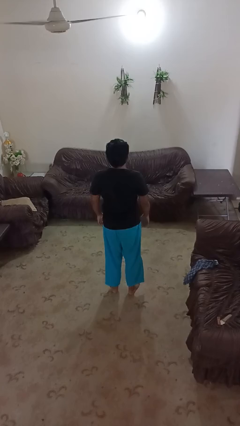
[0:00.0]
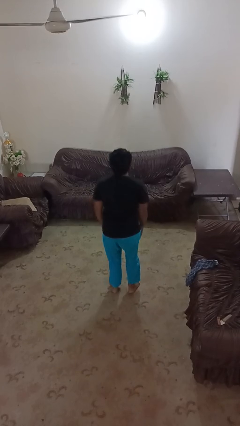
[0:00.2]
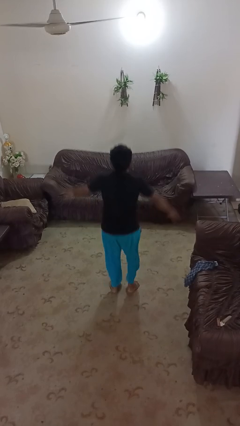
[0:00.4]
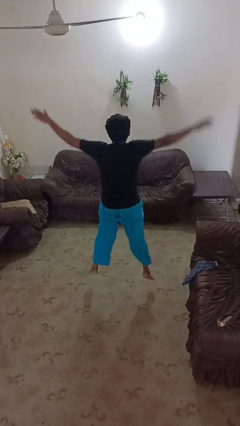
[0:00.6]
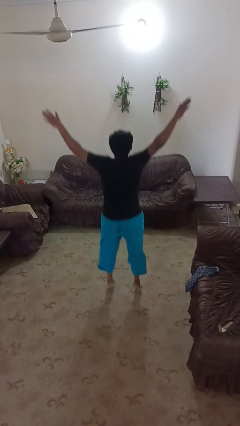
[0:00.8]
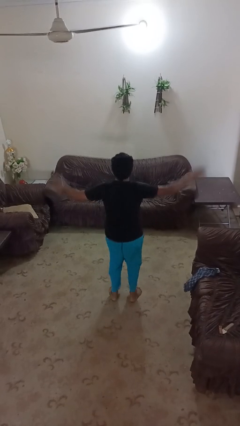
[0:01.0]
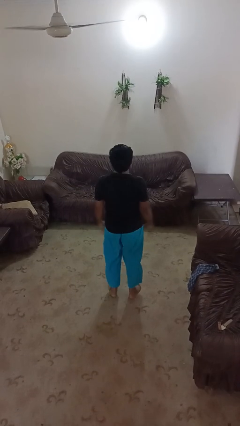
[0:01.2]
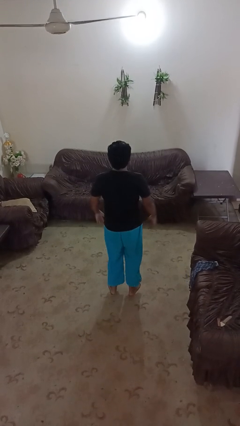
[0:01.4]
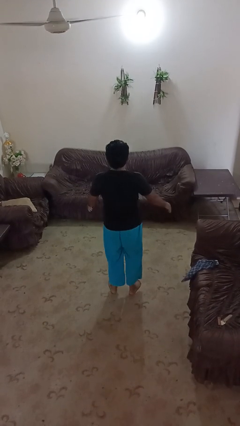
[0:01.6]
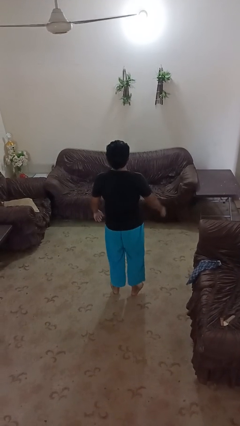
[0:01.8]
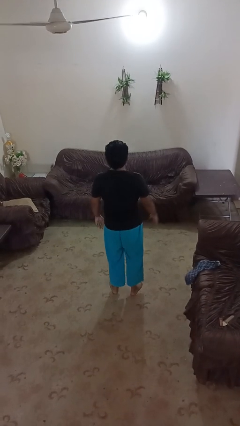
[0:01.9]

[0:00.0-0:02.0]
person exercises with jumping jacks

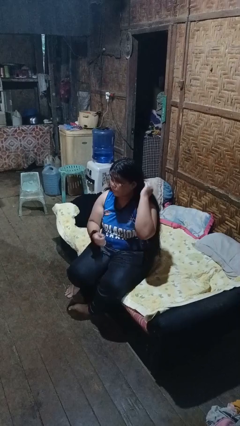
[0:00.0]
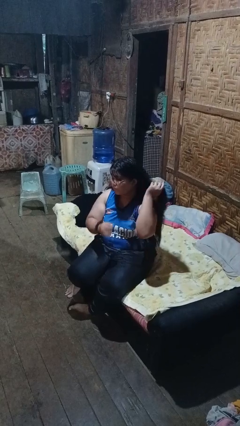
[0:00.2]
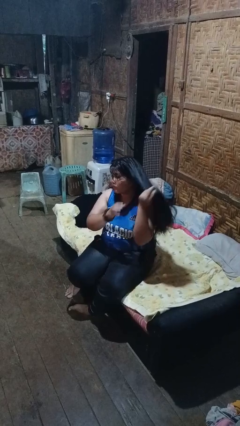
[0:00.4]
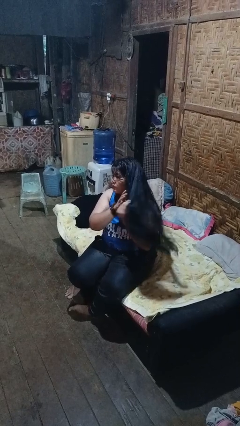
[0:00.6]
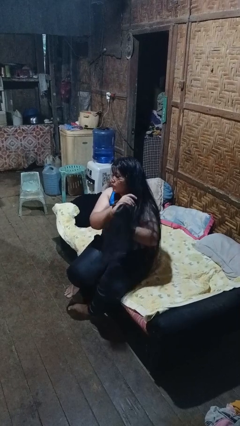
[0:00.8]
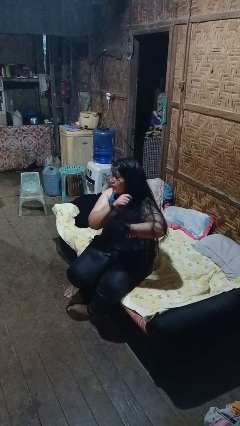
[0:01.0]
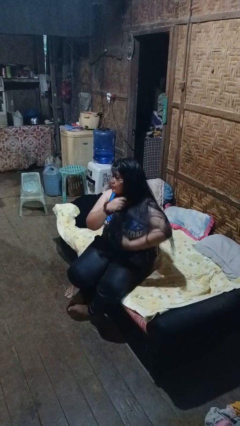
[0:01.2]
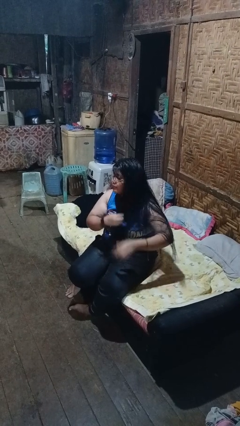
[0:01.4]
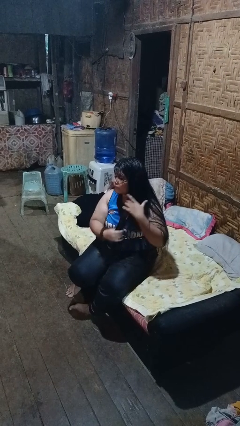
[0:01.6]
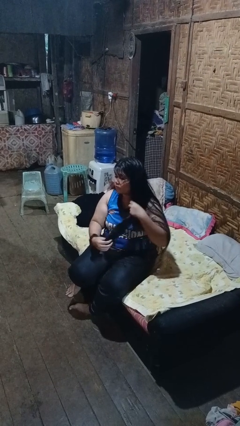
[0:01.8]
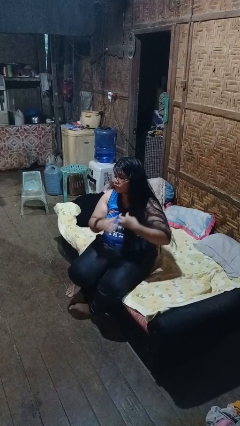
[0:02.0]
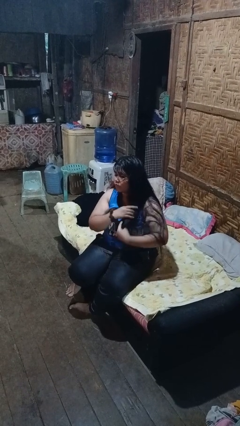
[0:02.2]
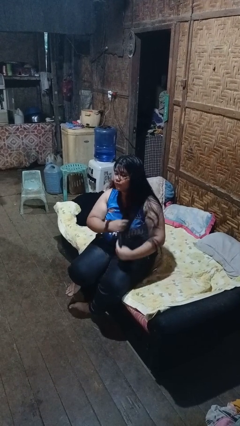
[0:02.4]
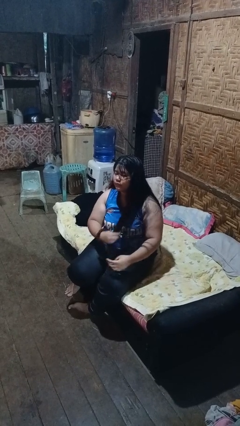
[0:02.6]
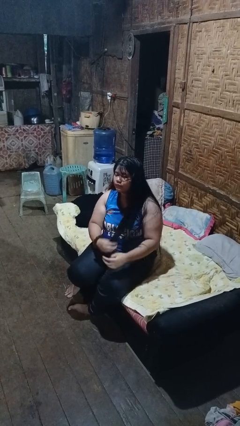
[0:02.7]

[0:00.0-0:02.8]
person strokes hair

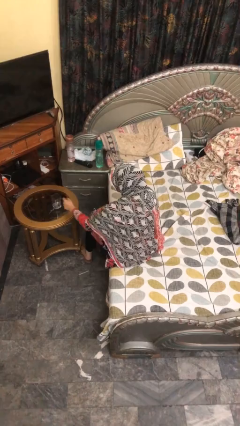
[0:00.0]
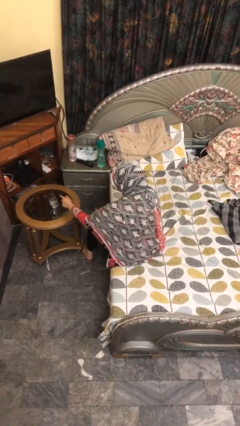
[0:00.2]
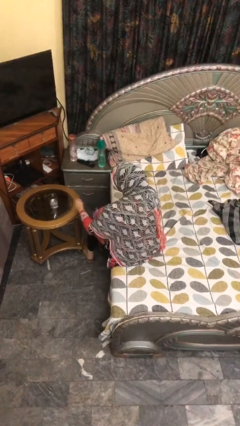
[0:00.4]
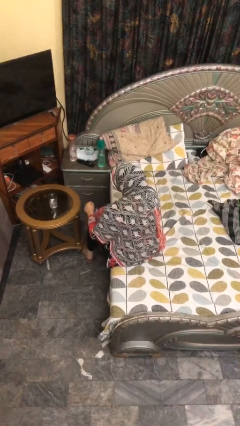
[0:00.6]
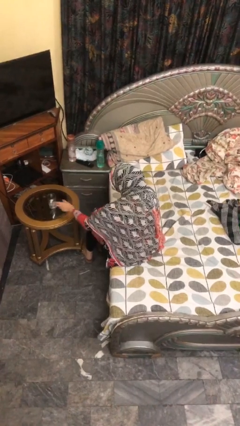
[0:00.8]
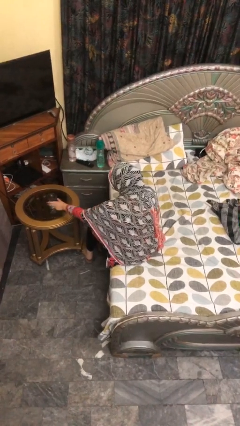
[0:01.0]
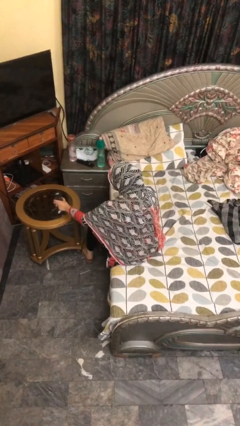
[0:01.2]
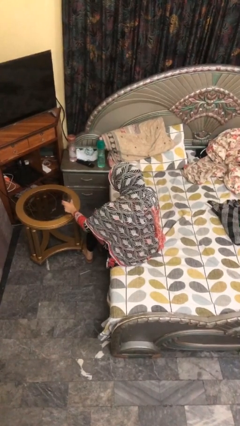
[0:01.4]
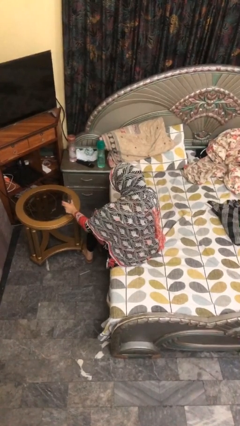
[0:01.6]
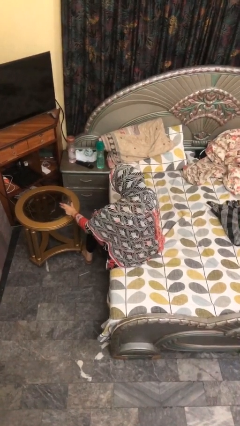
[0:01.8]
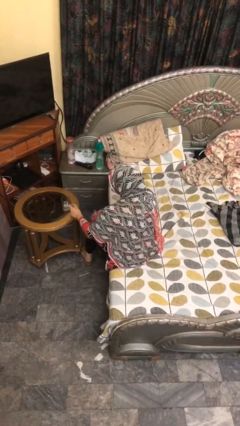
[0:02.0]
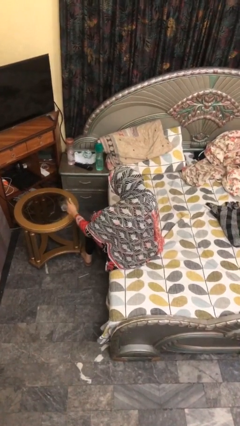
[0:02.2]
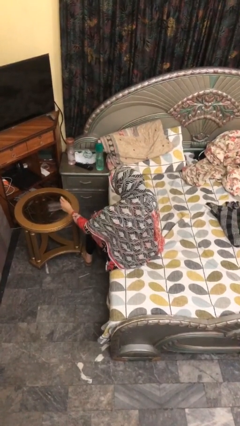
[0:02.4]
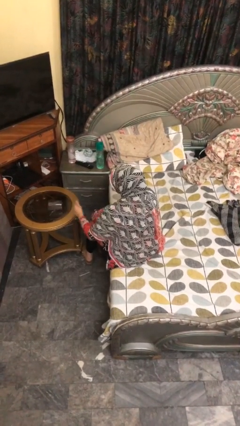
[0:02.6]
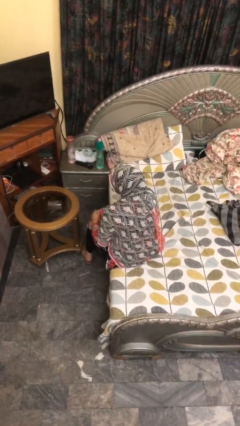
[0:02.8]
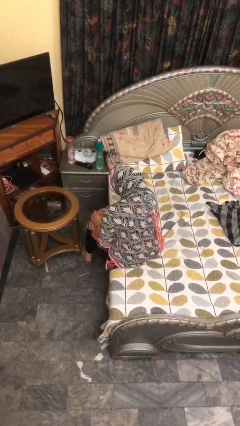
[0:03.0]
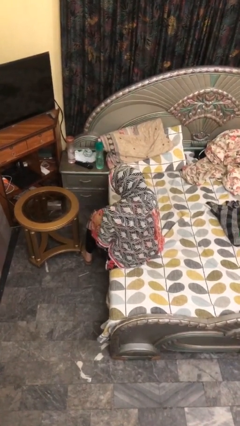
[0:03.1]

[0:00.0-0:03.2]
person spills on table

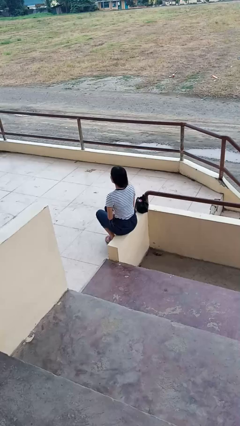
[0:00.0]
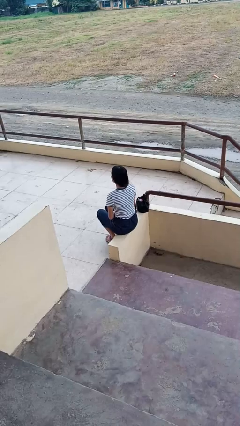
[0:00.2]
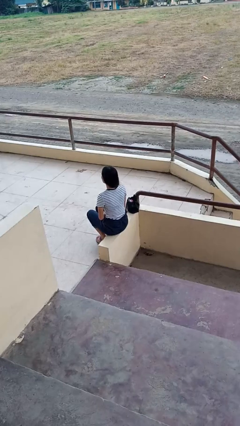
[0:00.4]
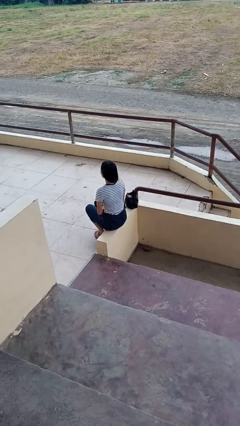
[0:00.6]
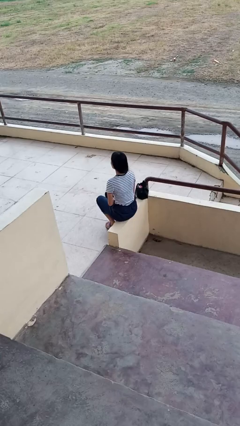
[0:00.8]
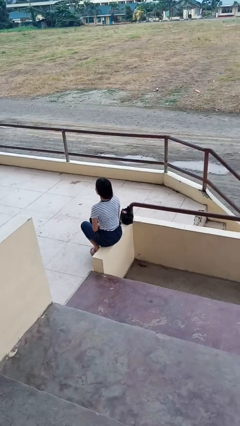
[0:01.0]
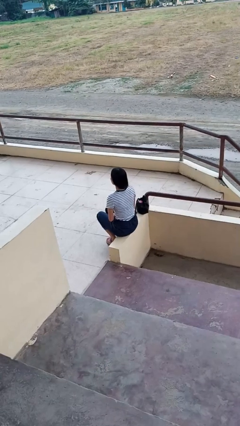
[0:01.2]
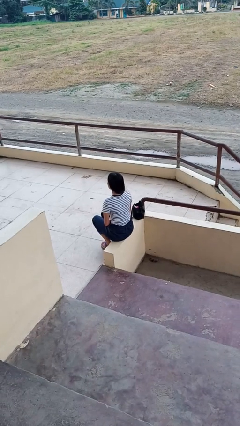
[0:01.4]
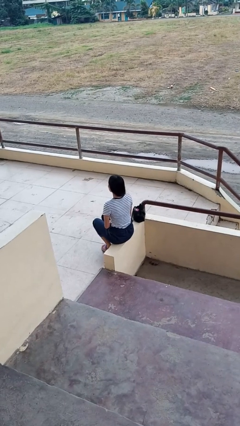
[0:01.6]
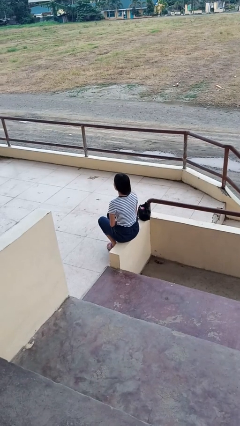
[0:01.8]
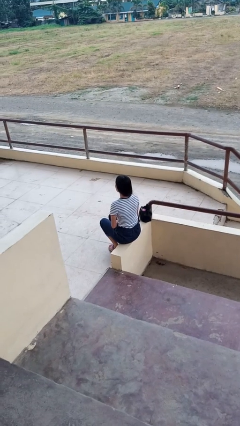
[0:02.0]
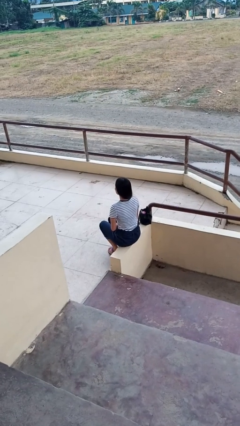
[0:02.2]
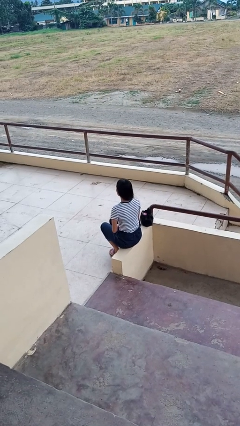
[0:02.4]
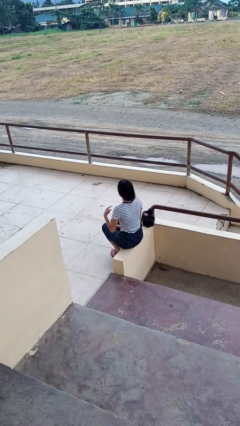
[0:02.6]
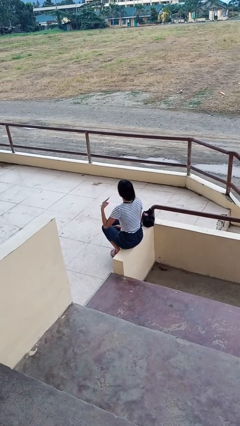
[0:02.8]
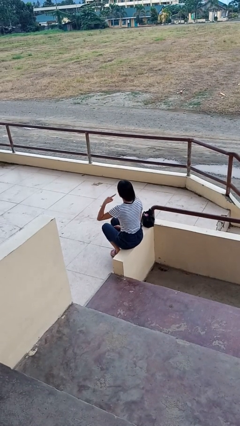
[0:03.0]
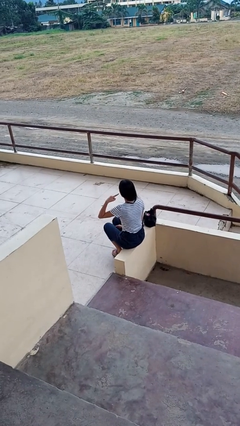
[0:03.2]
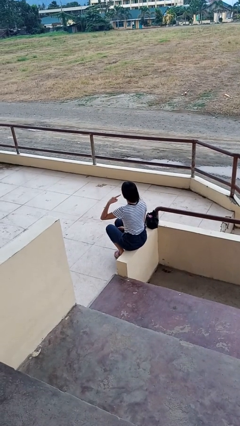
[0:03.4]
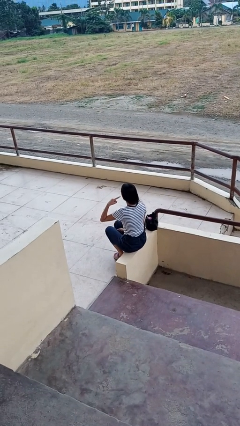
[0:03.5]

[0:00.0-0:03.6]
person gestures listen closely

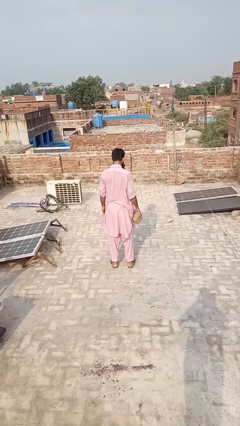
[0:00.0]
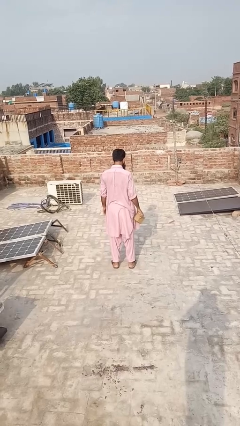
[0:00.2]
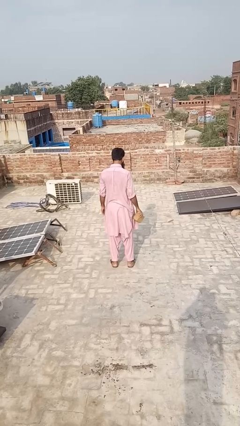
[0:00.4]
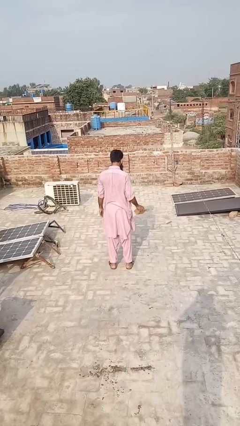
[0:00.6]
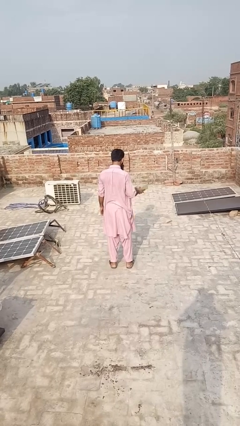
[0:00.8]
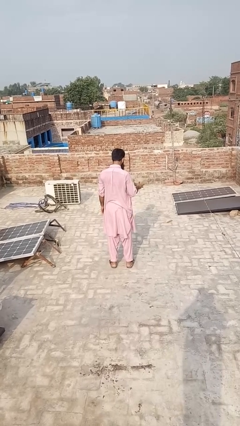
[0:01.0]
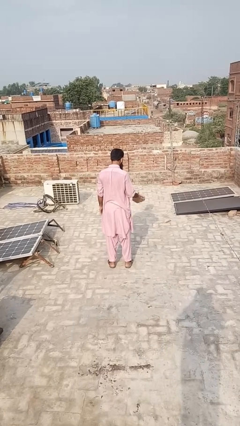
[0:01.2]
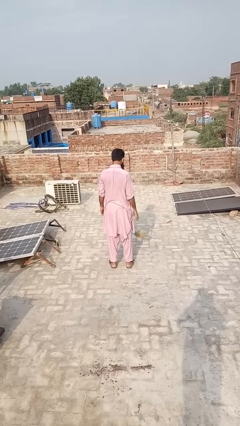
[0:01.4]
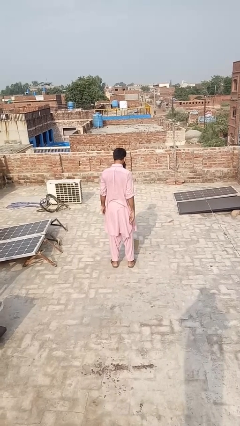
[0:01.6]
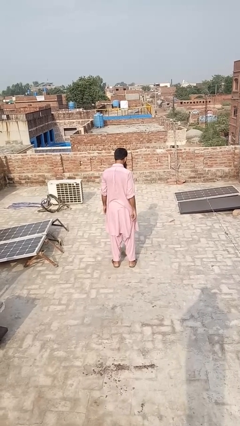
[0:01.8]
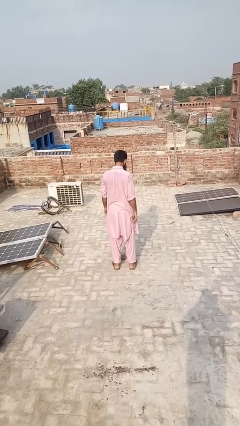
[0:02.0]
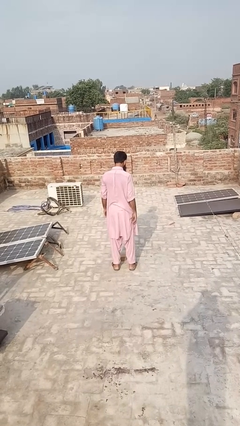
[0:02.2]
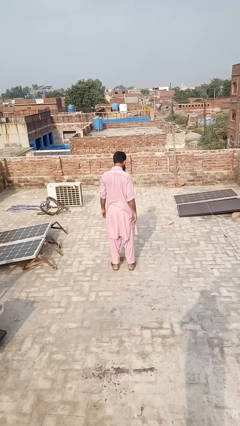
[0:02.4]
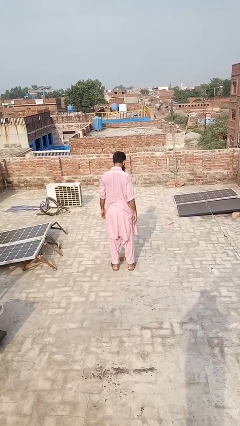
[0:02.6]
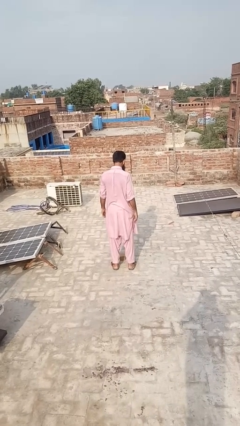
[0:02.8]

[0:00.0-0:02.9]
person throws object to ground

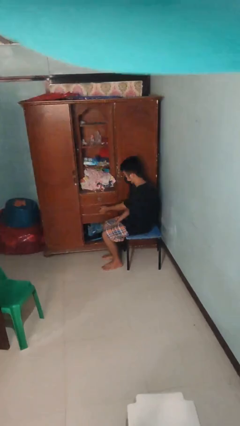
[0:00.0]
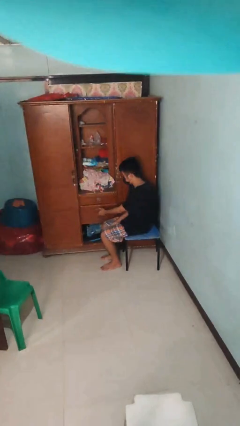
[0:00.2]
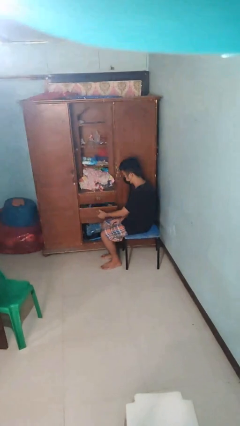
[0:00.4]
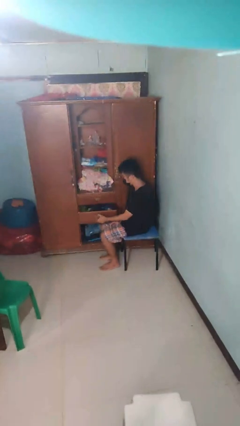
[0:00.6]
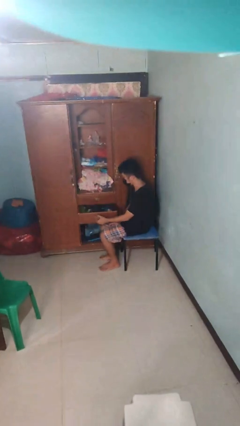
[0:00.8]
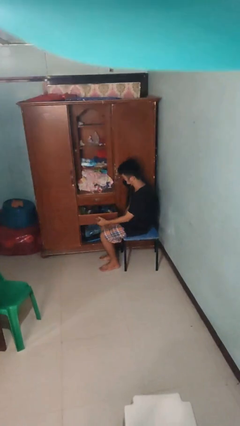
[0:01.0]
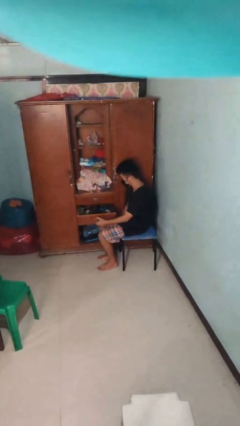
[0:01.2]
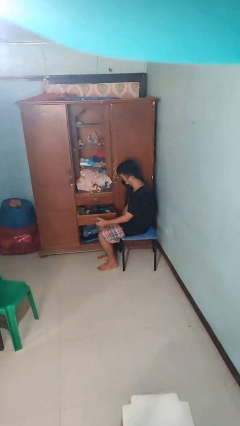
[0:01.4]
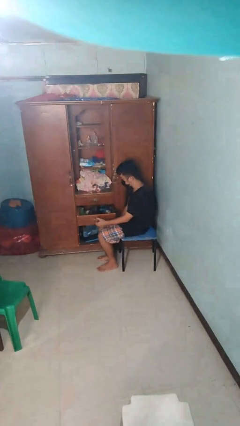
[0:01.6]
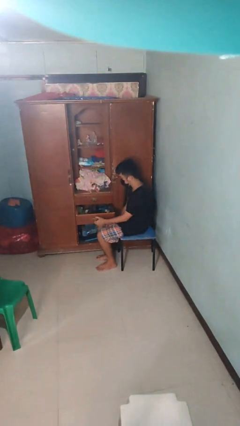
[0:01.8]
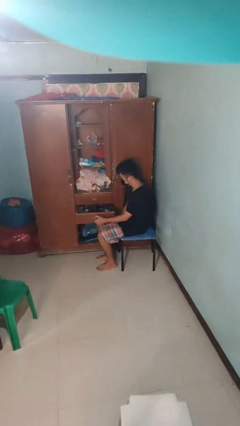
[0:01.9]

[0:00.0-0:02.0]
person opens dresser drawer

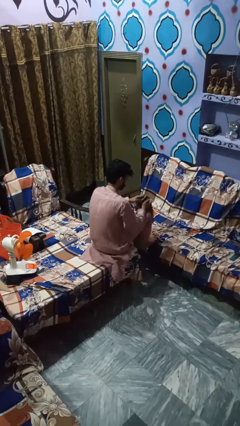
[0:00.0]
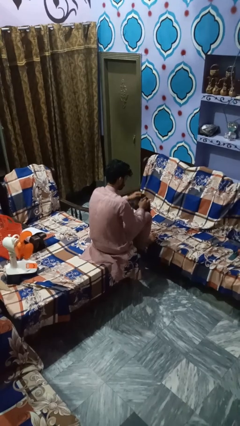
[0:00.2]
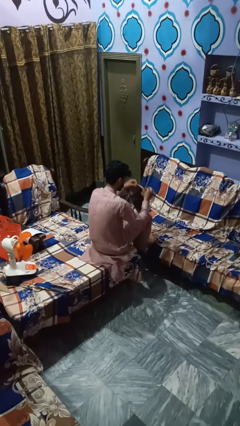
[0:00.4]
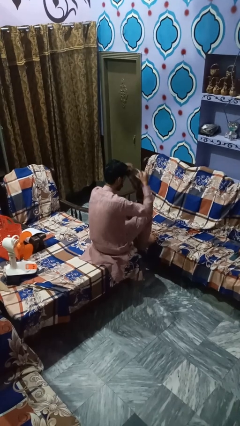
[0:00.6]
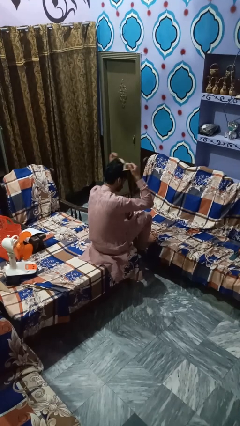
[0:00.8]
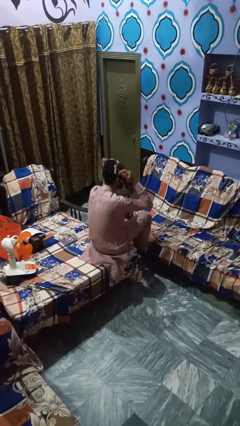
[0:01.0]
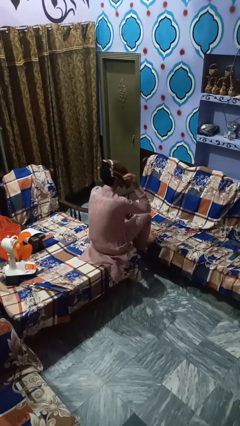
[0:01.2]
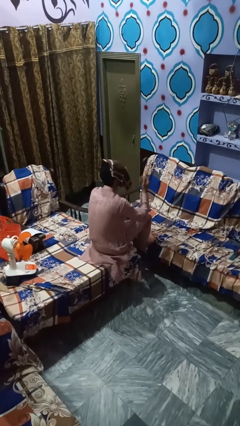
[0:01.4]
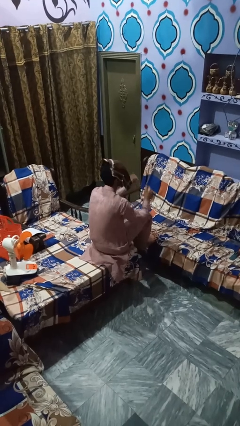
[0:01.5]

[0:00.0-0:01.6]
person yawns
